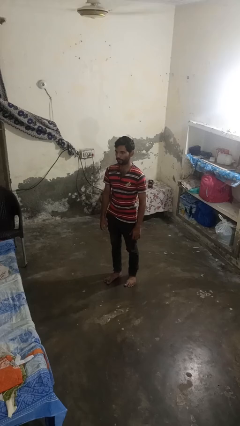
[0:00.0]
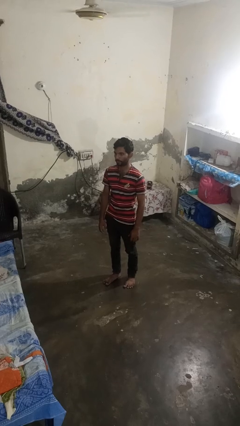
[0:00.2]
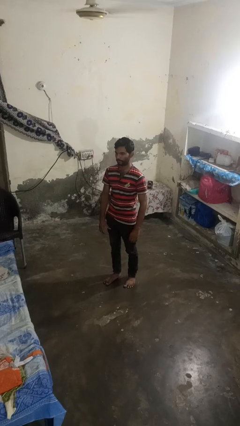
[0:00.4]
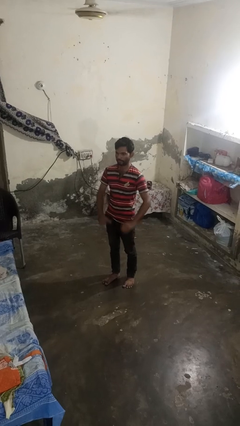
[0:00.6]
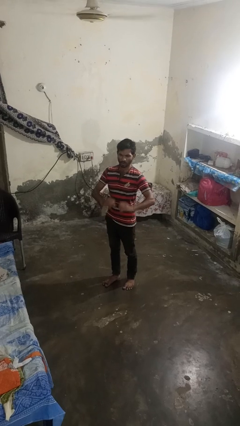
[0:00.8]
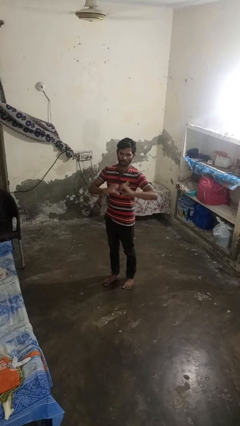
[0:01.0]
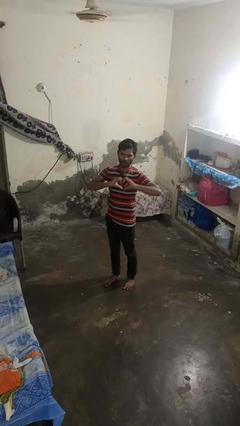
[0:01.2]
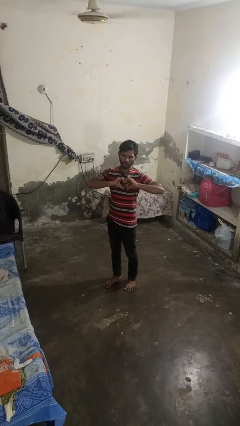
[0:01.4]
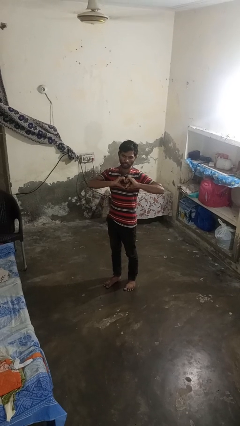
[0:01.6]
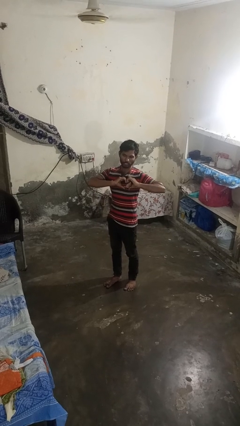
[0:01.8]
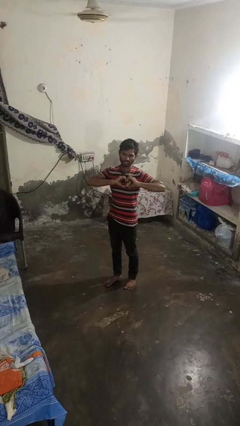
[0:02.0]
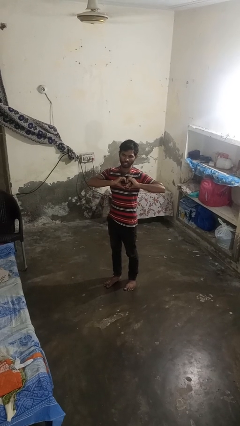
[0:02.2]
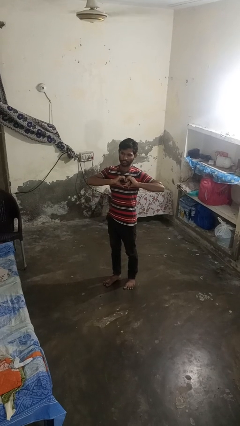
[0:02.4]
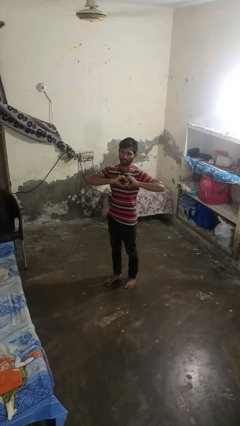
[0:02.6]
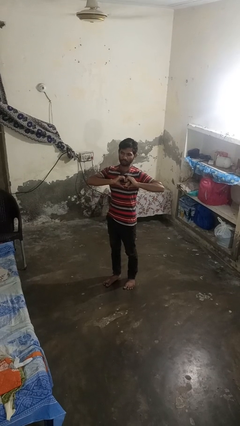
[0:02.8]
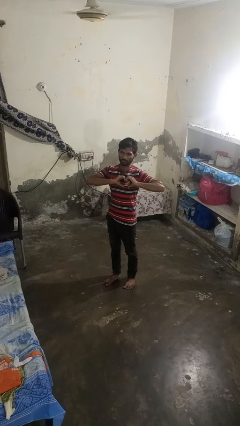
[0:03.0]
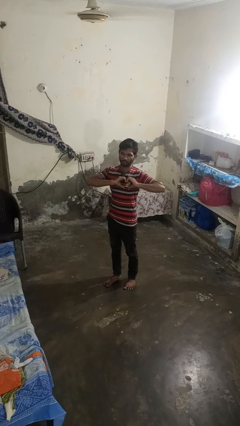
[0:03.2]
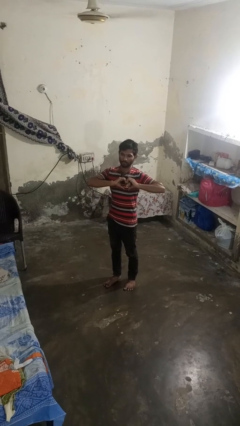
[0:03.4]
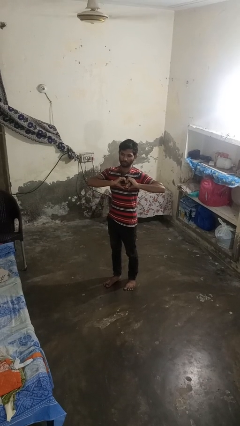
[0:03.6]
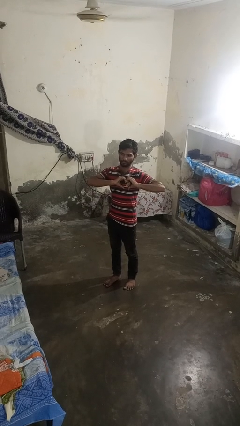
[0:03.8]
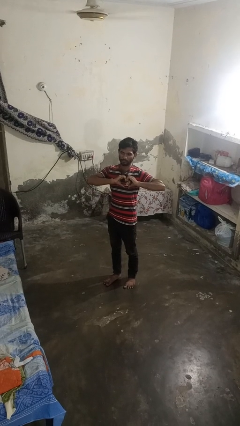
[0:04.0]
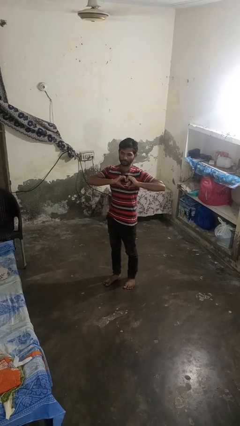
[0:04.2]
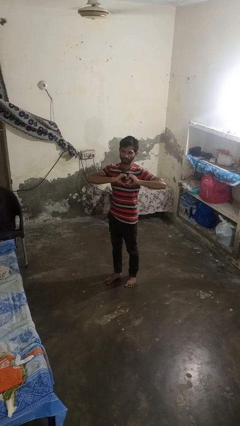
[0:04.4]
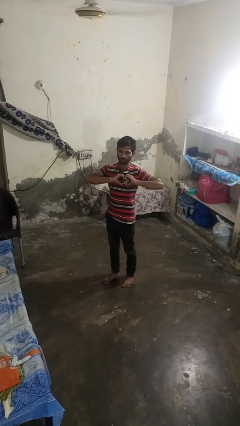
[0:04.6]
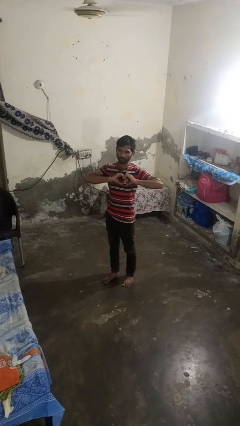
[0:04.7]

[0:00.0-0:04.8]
person gestures heart

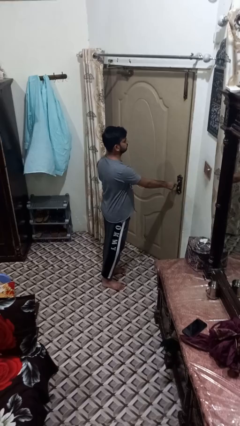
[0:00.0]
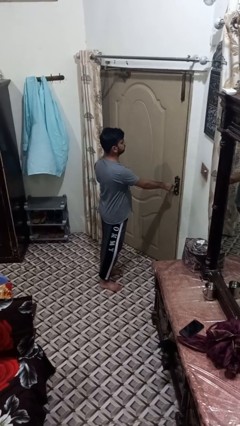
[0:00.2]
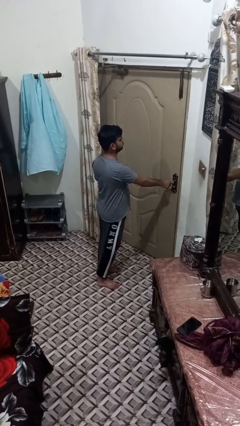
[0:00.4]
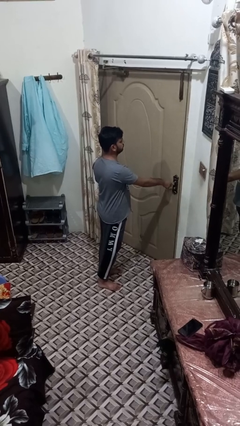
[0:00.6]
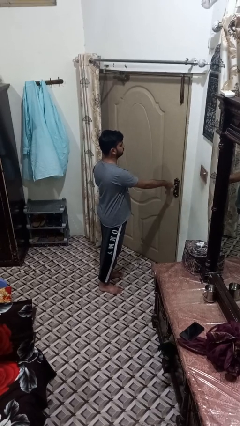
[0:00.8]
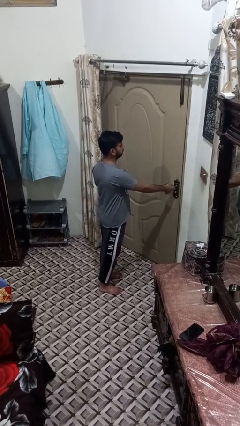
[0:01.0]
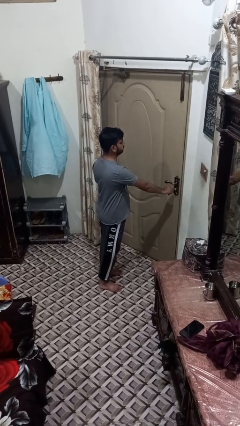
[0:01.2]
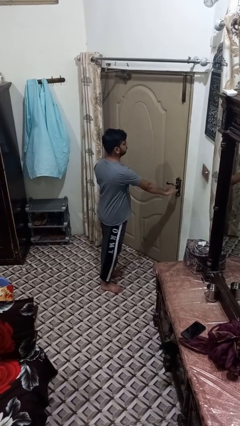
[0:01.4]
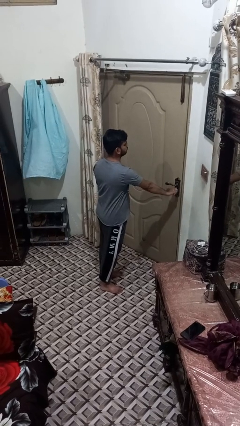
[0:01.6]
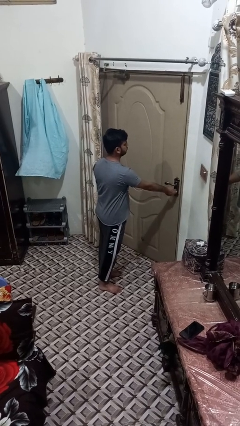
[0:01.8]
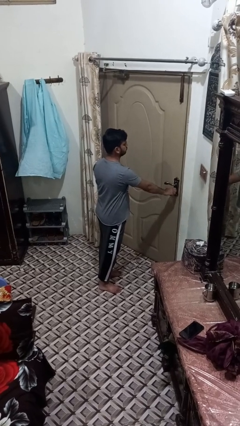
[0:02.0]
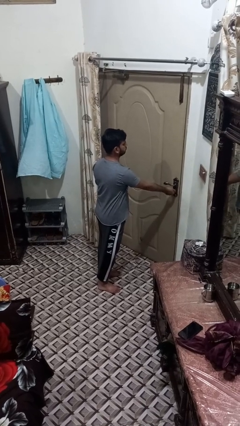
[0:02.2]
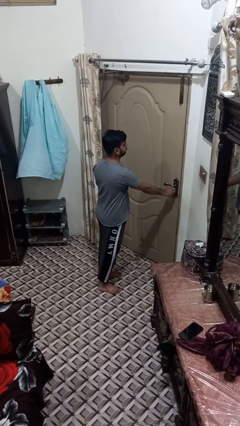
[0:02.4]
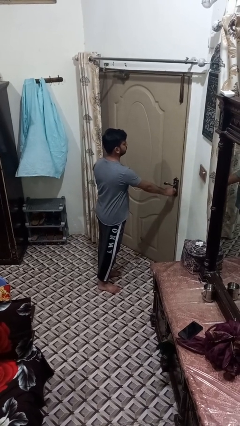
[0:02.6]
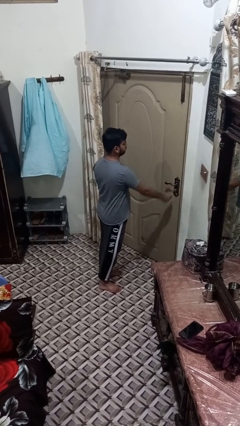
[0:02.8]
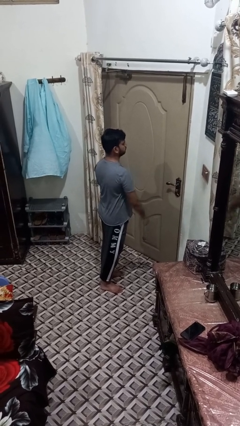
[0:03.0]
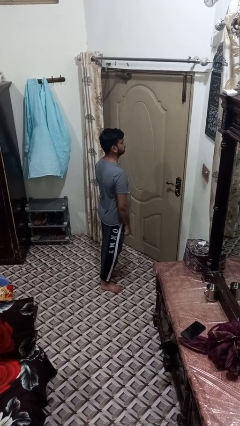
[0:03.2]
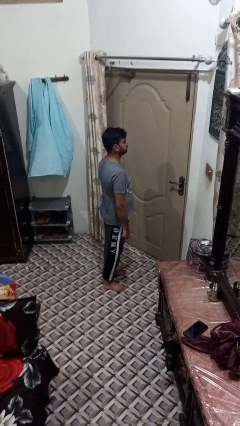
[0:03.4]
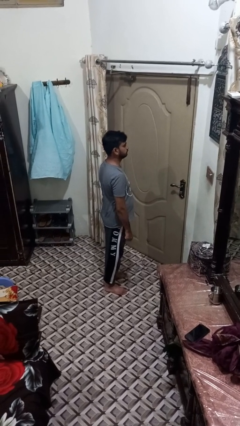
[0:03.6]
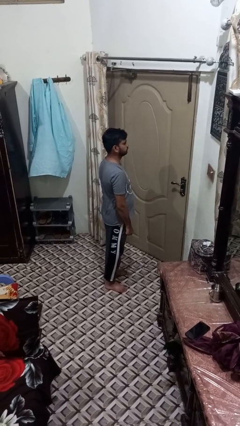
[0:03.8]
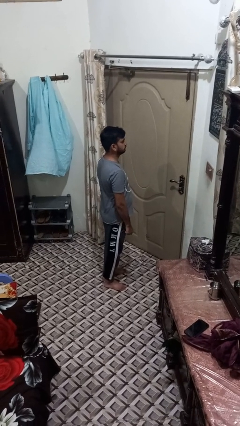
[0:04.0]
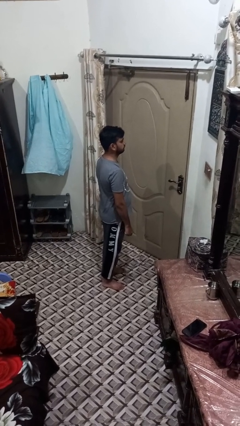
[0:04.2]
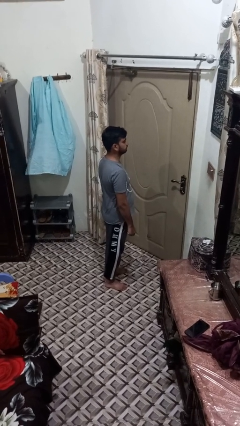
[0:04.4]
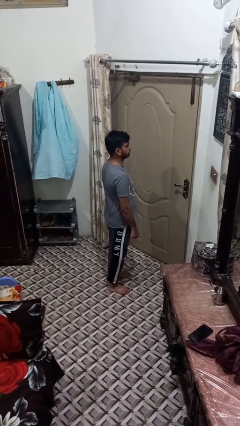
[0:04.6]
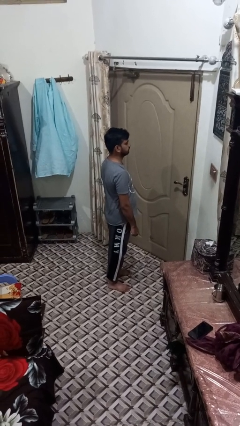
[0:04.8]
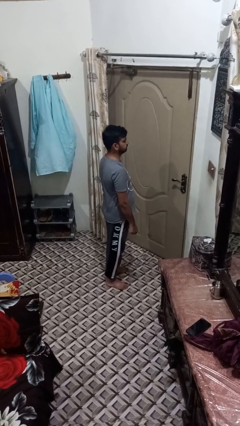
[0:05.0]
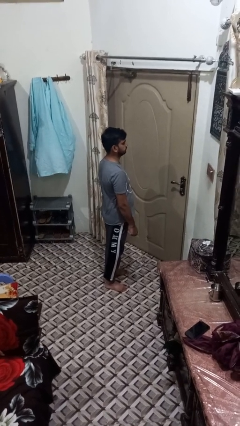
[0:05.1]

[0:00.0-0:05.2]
person locks door with keys

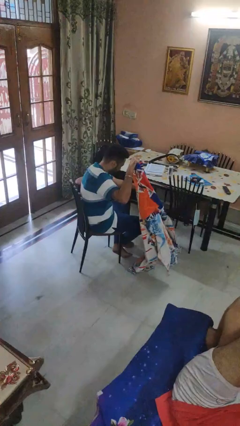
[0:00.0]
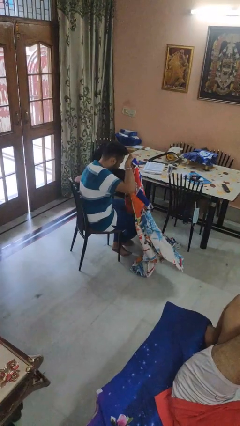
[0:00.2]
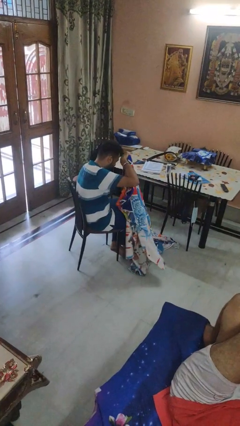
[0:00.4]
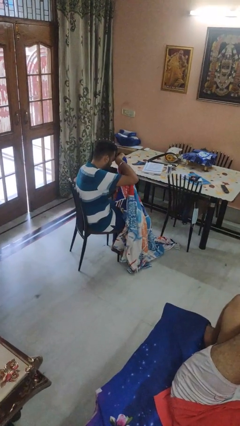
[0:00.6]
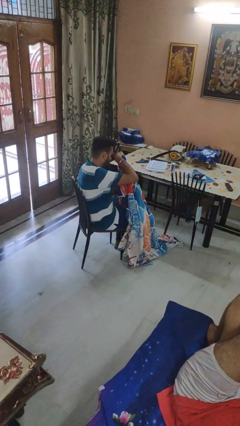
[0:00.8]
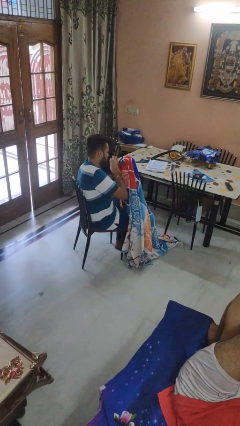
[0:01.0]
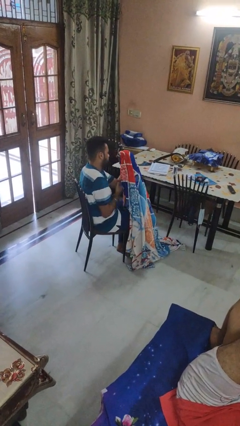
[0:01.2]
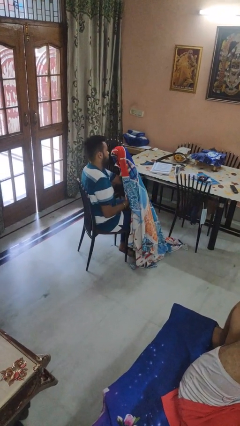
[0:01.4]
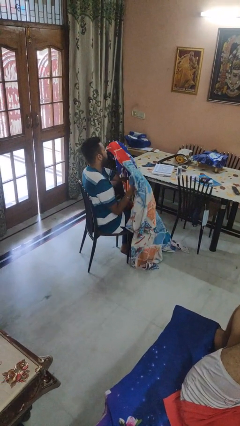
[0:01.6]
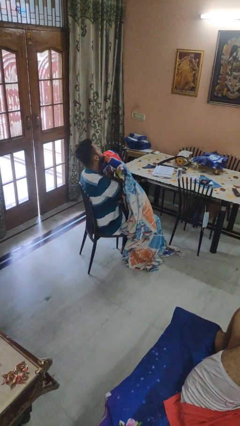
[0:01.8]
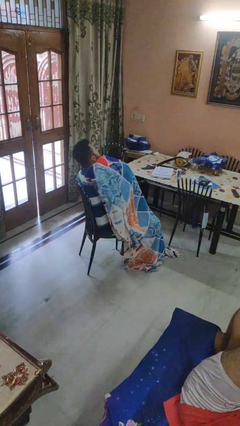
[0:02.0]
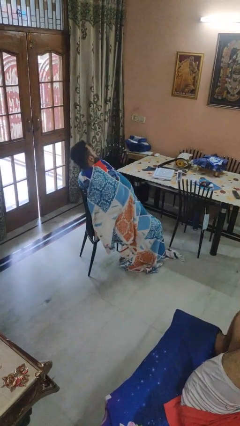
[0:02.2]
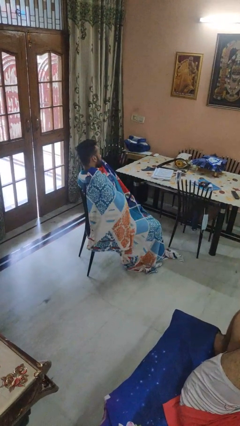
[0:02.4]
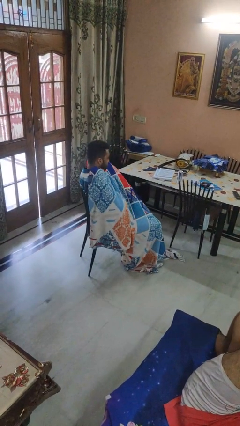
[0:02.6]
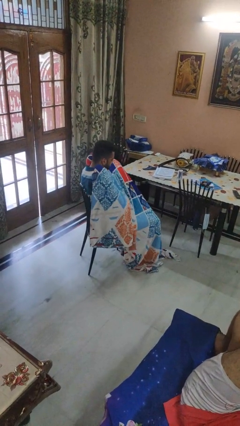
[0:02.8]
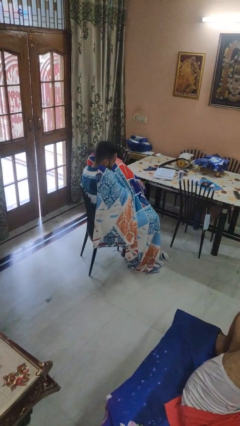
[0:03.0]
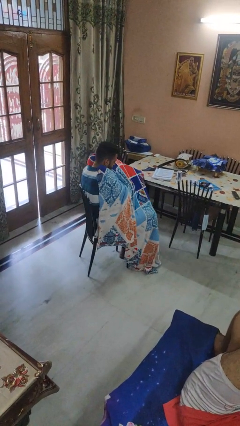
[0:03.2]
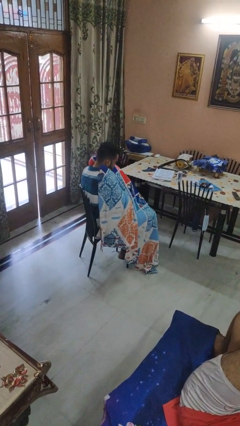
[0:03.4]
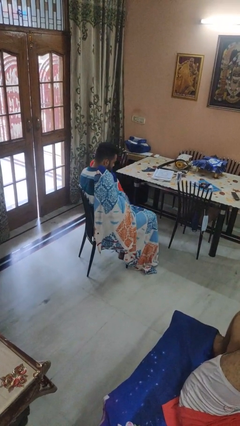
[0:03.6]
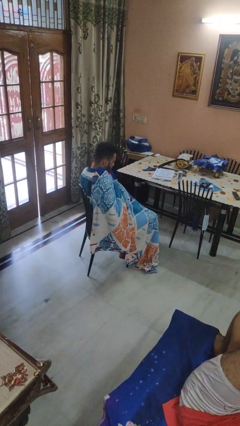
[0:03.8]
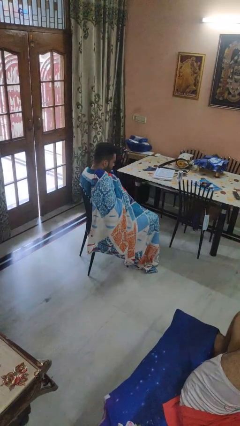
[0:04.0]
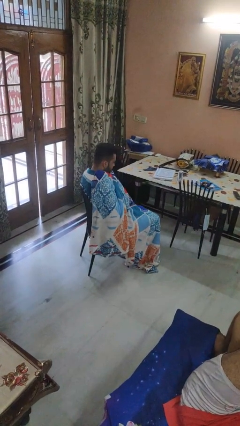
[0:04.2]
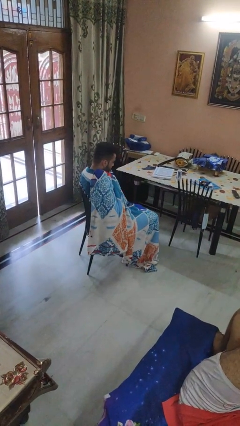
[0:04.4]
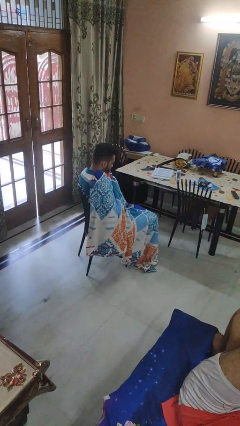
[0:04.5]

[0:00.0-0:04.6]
person covers with blanket

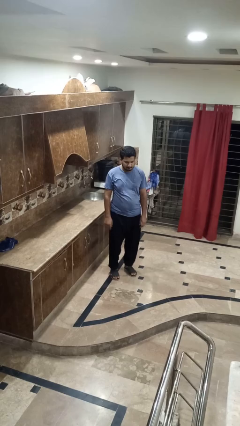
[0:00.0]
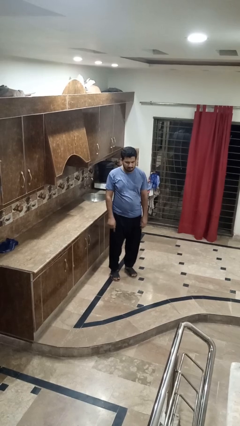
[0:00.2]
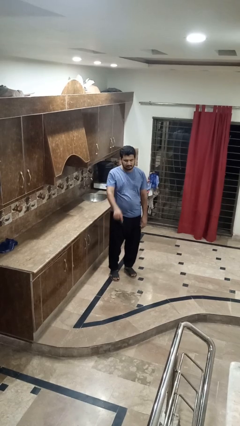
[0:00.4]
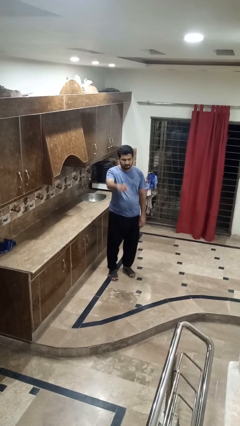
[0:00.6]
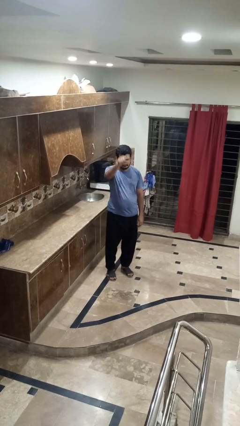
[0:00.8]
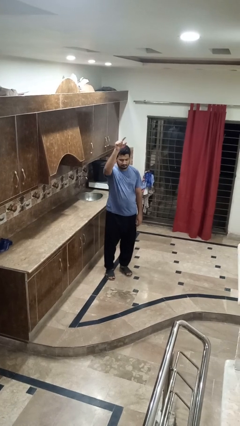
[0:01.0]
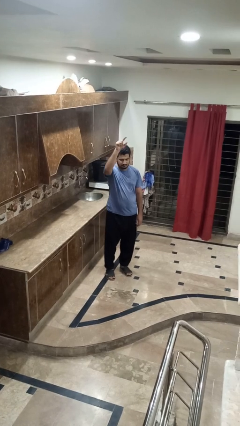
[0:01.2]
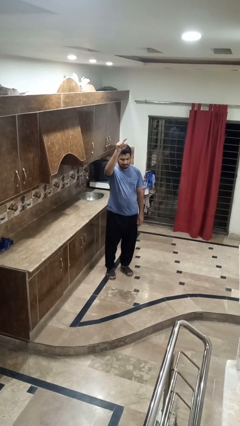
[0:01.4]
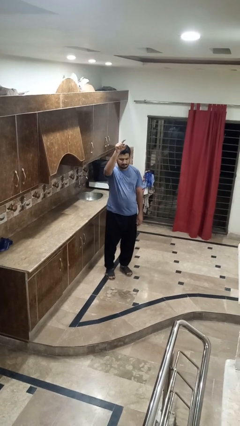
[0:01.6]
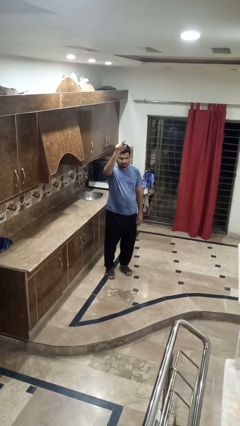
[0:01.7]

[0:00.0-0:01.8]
person gestures swipe up

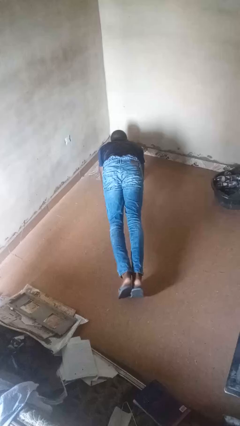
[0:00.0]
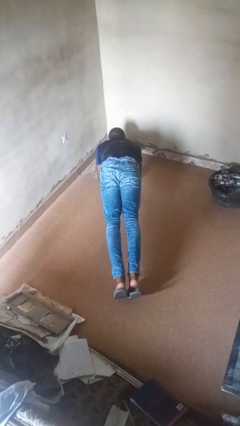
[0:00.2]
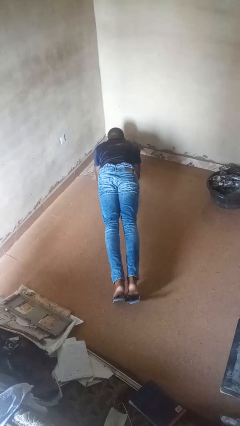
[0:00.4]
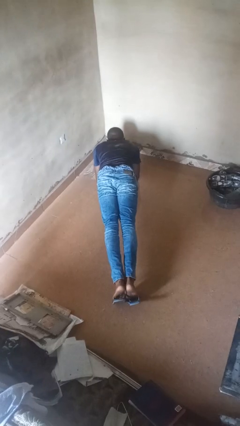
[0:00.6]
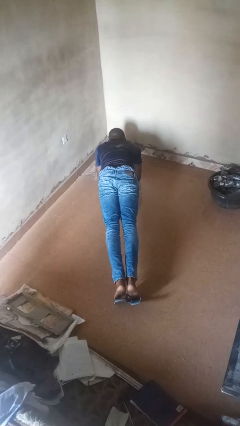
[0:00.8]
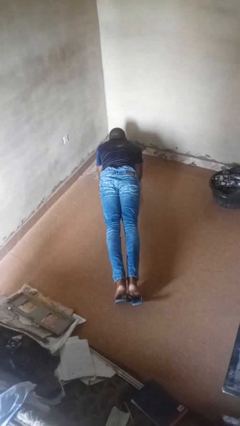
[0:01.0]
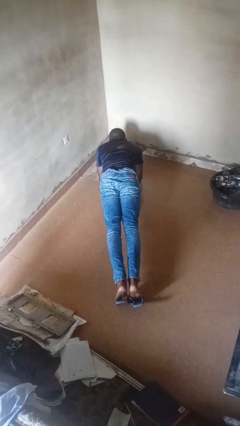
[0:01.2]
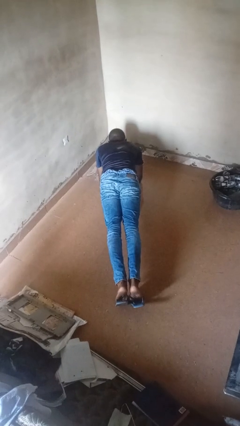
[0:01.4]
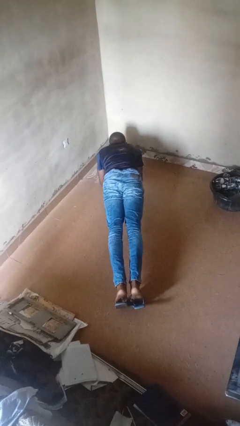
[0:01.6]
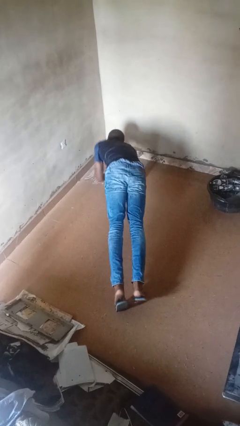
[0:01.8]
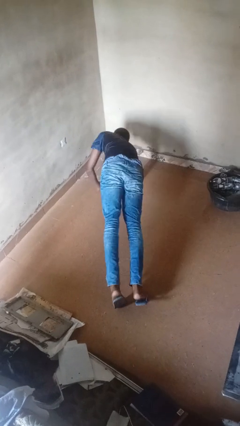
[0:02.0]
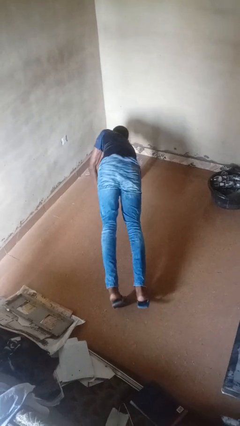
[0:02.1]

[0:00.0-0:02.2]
person exercises with plank
